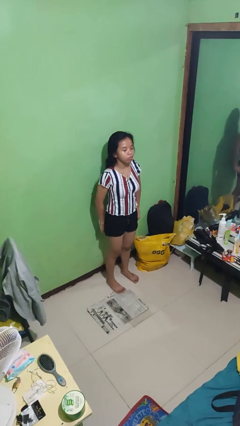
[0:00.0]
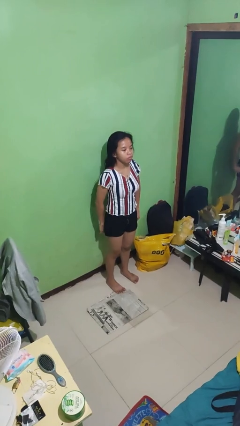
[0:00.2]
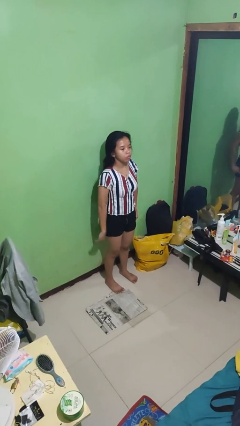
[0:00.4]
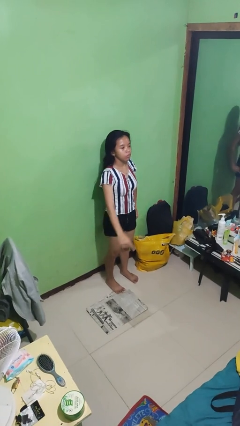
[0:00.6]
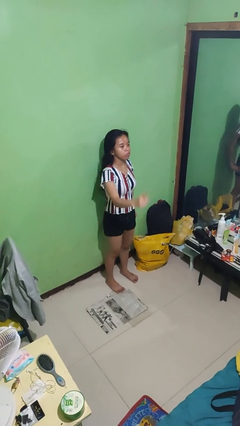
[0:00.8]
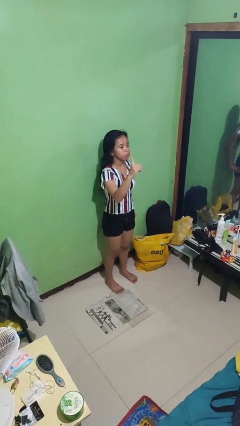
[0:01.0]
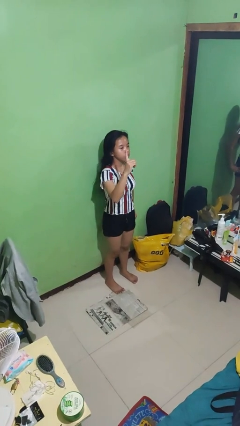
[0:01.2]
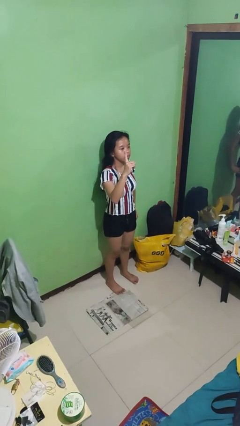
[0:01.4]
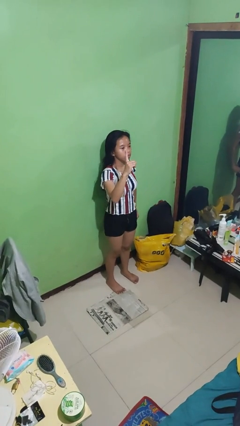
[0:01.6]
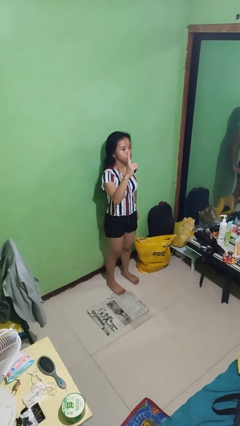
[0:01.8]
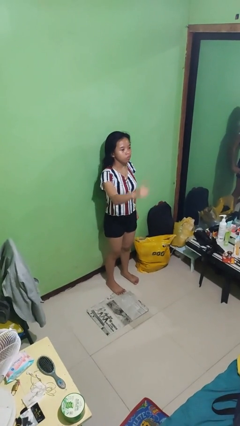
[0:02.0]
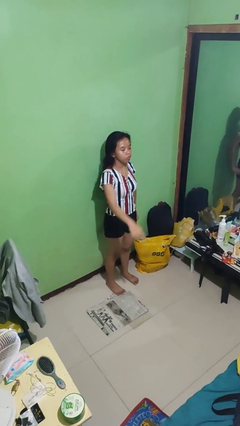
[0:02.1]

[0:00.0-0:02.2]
person gestures number one

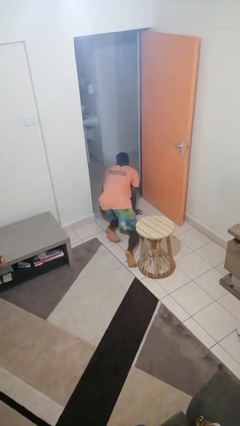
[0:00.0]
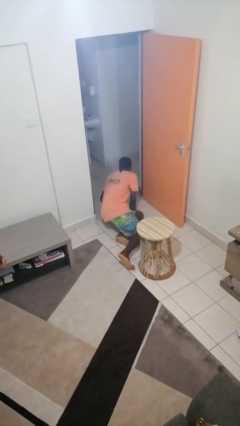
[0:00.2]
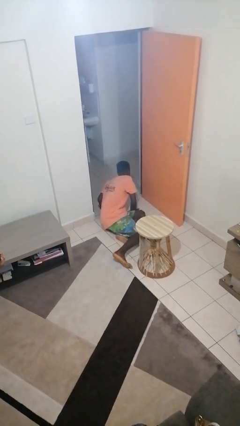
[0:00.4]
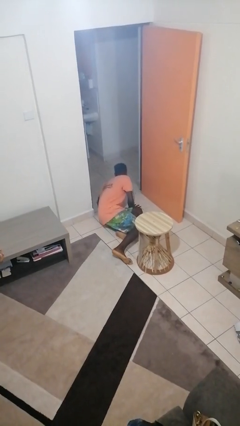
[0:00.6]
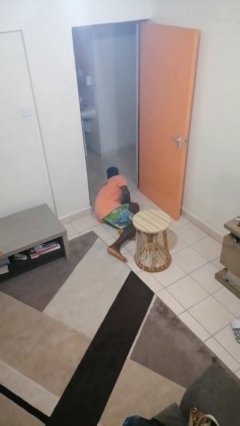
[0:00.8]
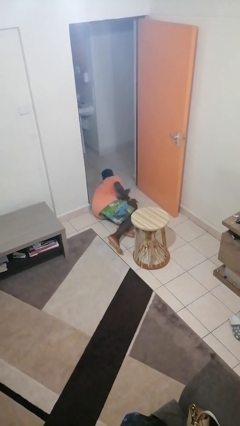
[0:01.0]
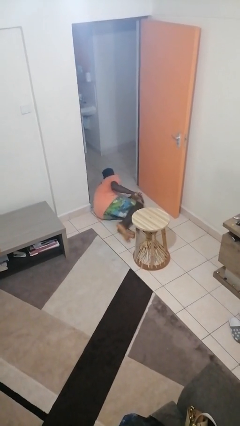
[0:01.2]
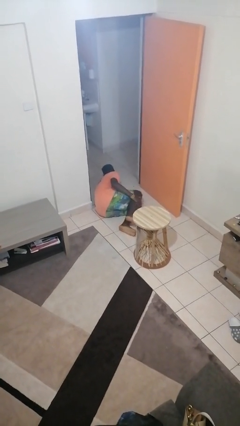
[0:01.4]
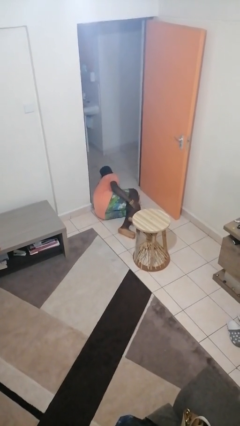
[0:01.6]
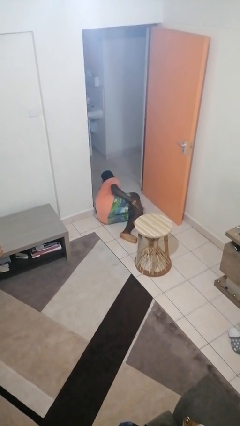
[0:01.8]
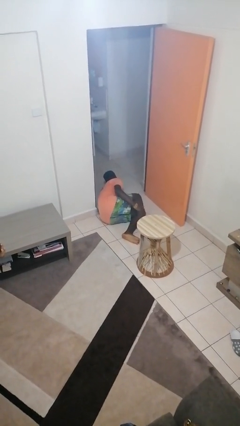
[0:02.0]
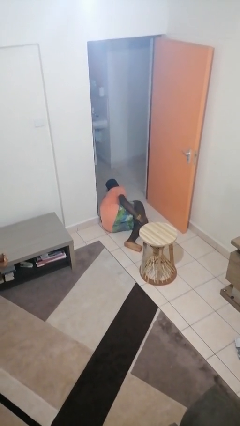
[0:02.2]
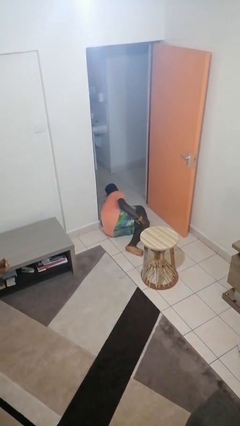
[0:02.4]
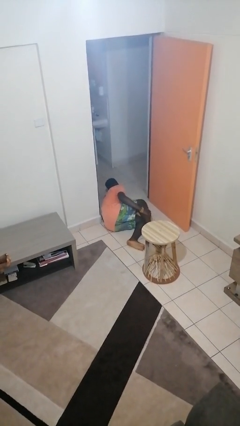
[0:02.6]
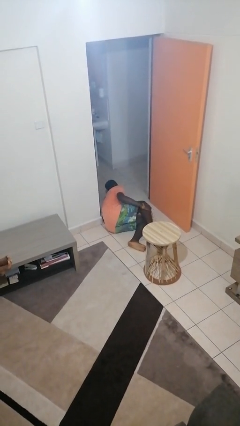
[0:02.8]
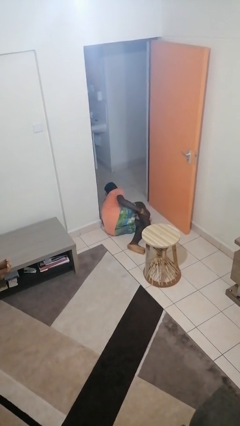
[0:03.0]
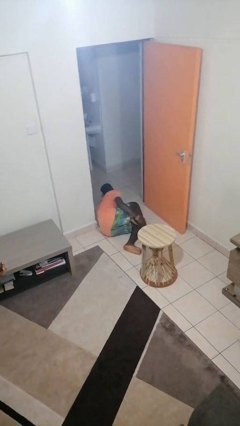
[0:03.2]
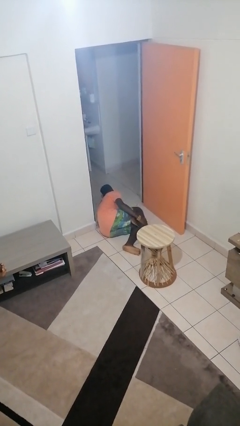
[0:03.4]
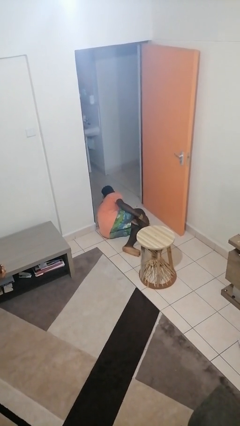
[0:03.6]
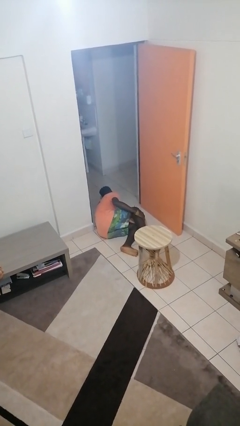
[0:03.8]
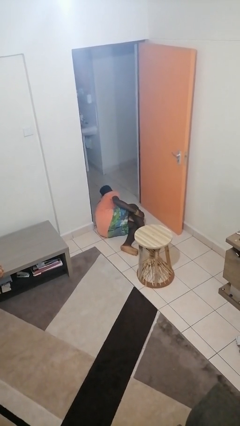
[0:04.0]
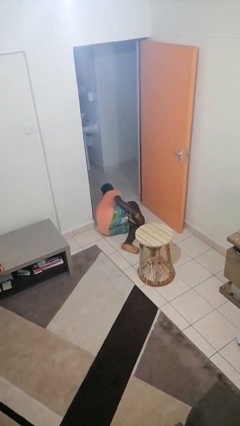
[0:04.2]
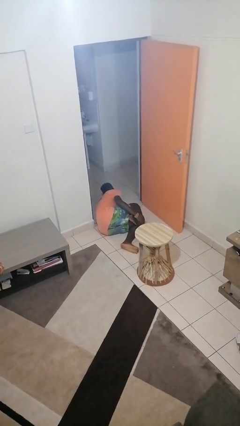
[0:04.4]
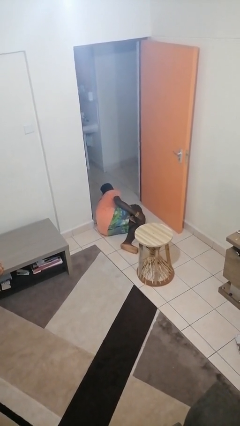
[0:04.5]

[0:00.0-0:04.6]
person lies down on floor

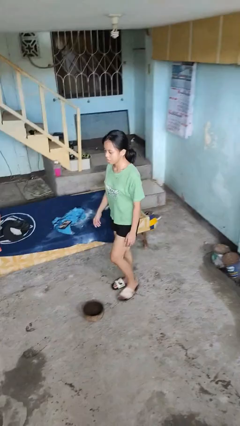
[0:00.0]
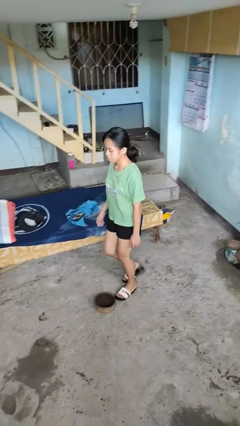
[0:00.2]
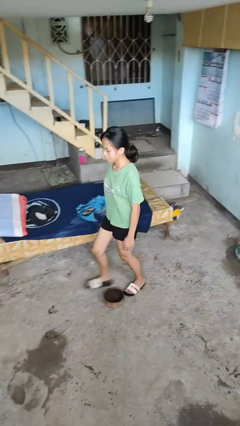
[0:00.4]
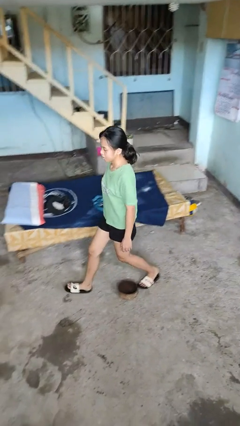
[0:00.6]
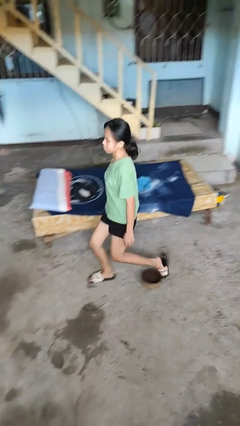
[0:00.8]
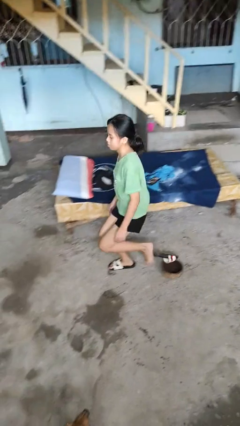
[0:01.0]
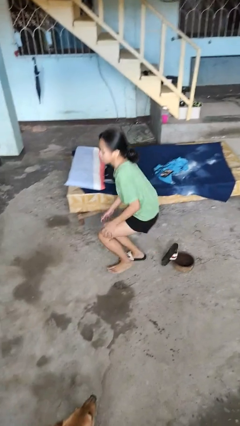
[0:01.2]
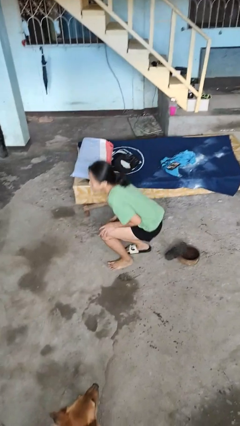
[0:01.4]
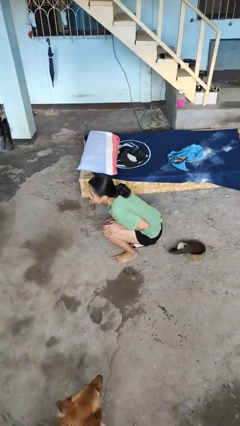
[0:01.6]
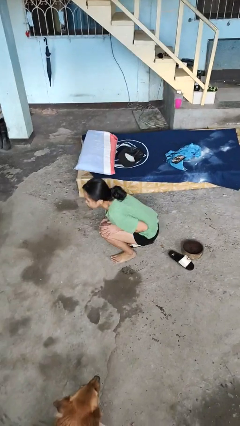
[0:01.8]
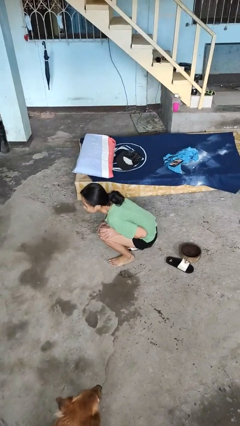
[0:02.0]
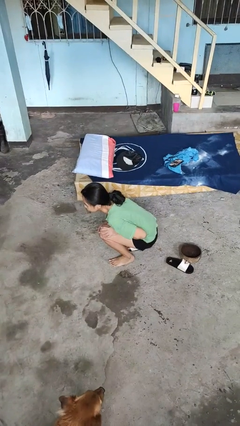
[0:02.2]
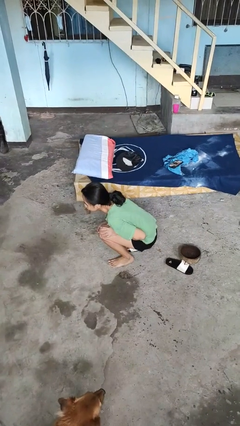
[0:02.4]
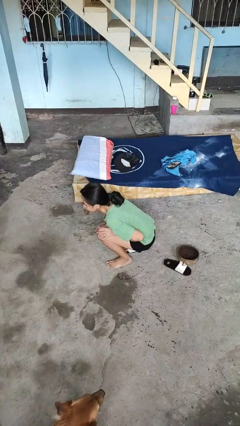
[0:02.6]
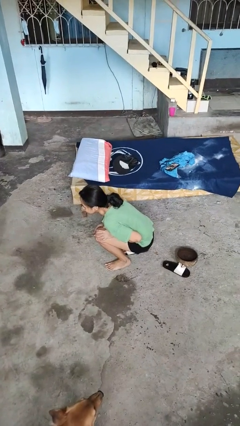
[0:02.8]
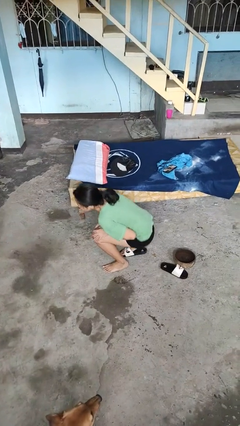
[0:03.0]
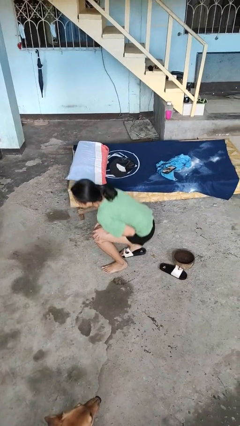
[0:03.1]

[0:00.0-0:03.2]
person trips on object on floor

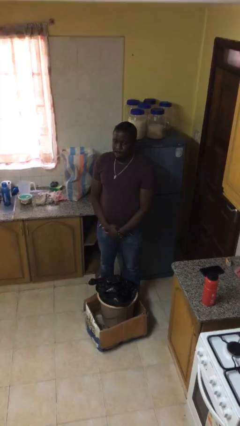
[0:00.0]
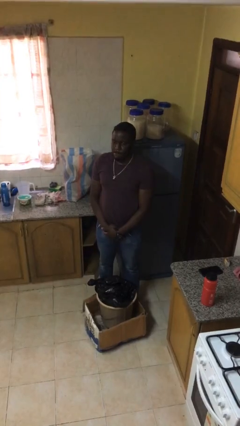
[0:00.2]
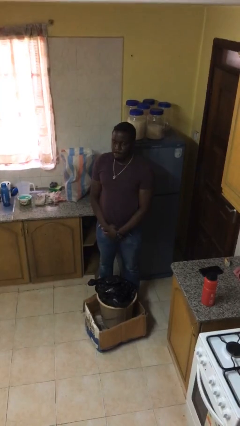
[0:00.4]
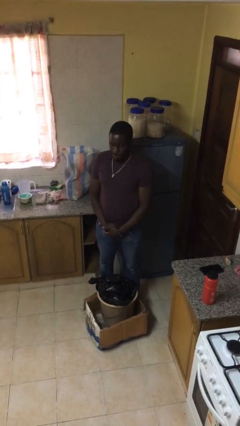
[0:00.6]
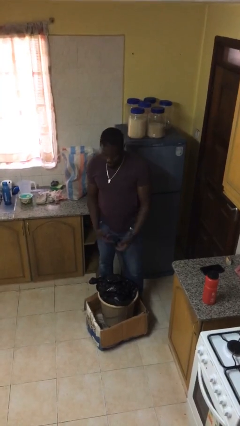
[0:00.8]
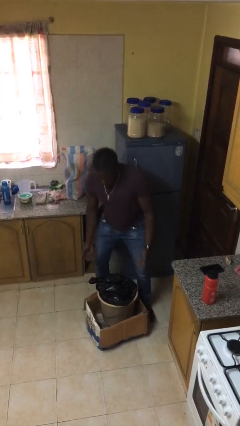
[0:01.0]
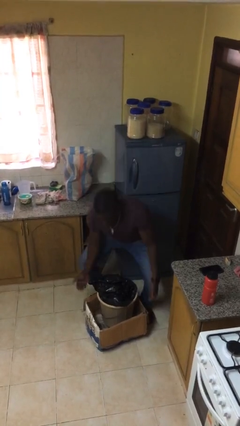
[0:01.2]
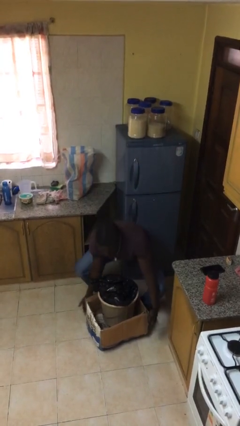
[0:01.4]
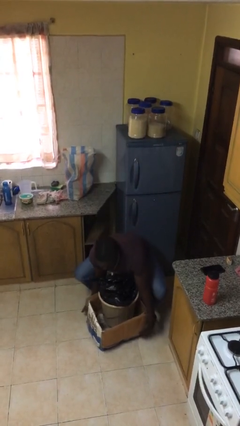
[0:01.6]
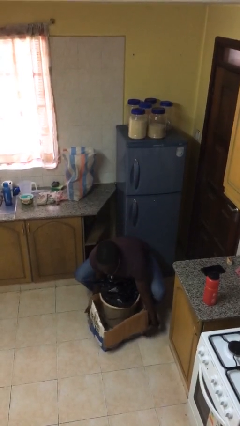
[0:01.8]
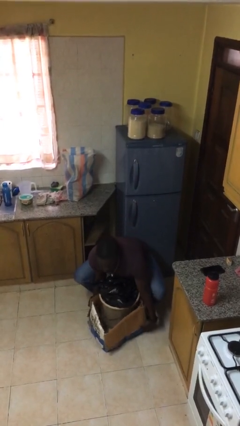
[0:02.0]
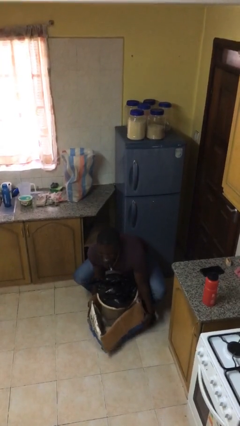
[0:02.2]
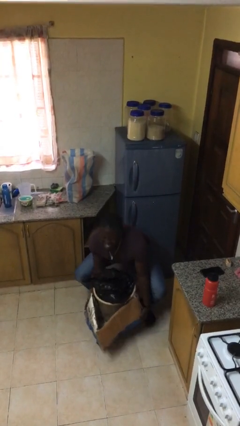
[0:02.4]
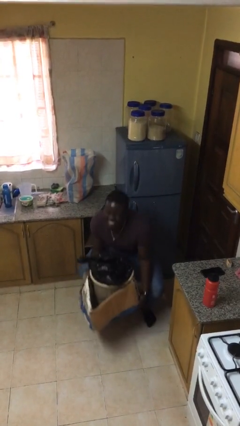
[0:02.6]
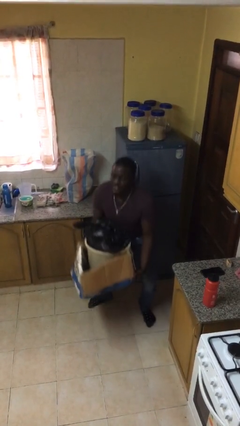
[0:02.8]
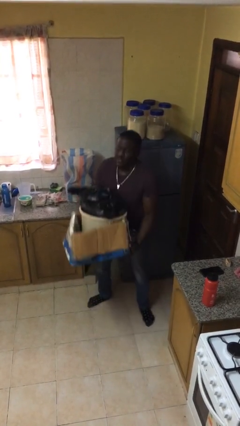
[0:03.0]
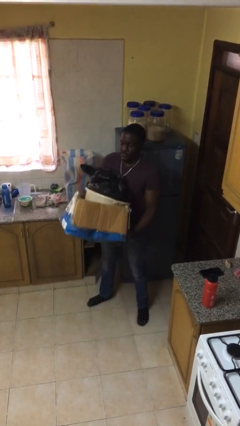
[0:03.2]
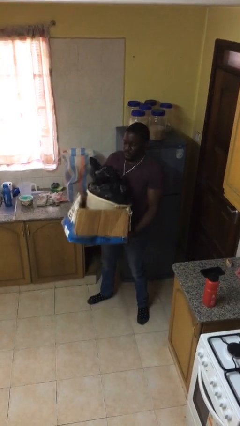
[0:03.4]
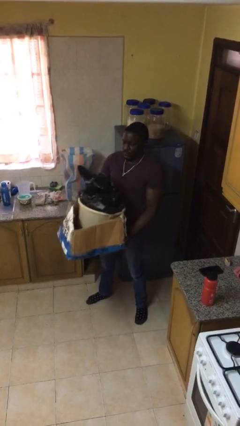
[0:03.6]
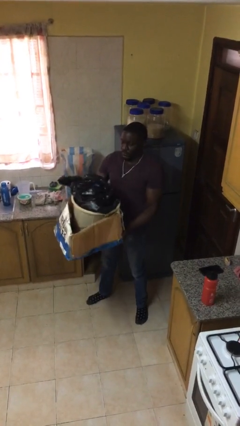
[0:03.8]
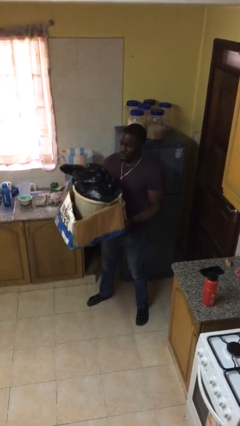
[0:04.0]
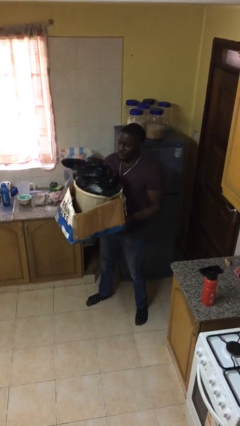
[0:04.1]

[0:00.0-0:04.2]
person picks up object from floor

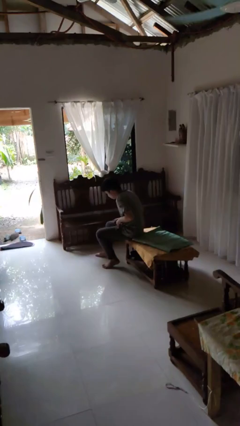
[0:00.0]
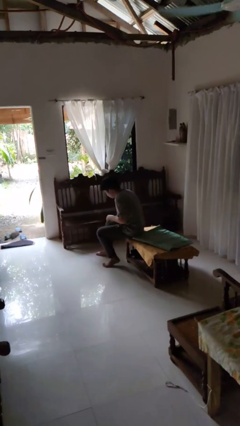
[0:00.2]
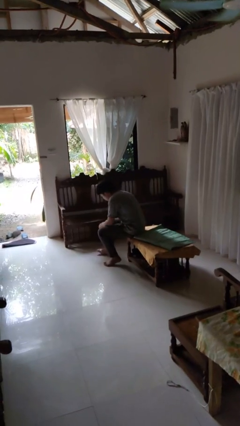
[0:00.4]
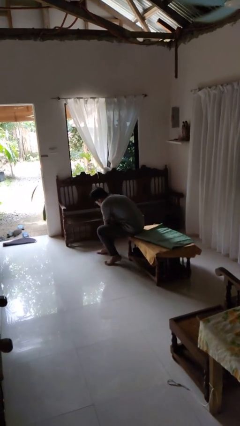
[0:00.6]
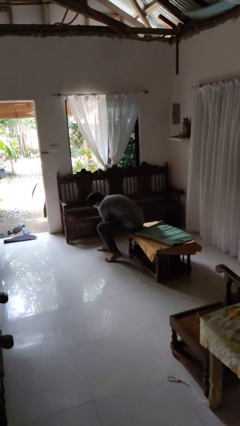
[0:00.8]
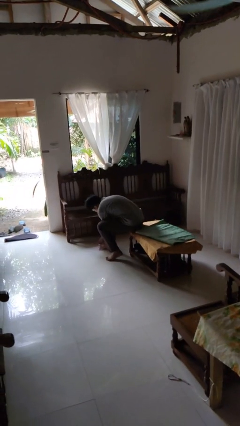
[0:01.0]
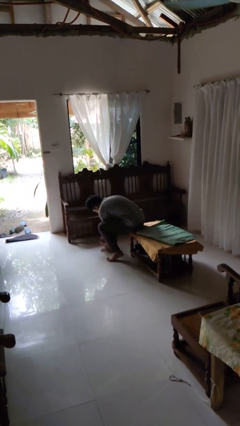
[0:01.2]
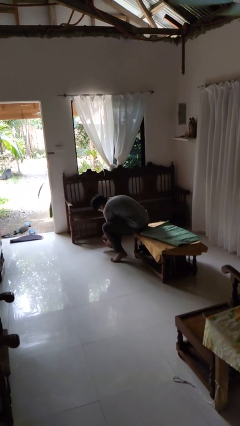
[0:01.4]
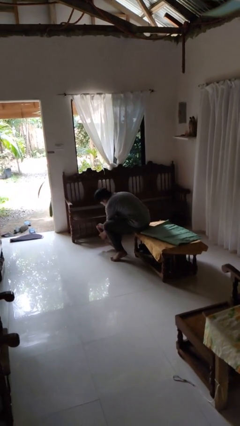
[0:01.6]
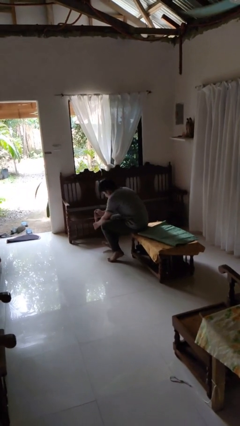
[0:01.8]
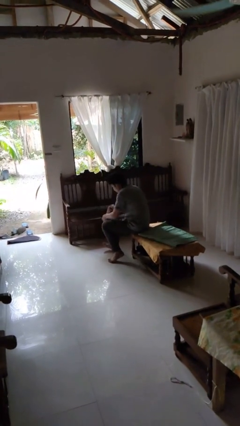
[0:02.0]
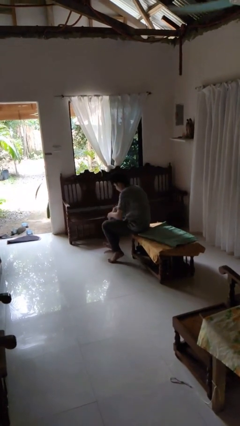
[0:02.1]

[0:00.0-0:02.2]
person takes off socks

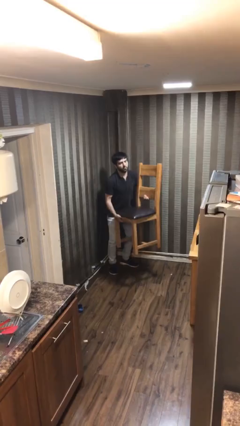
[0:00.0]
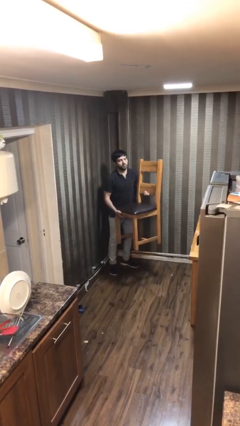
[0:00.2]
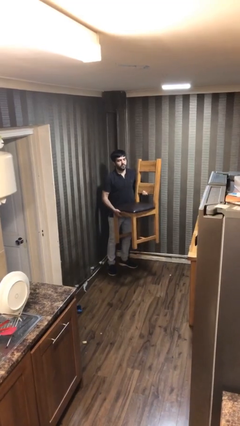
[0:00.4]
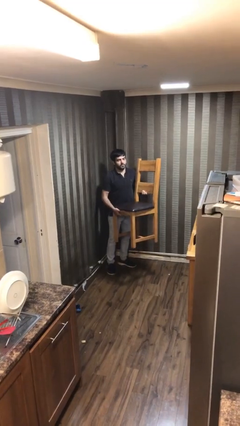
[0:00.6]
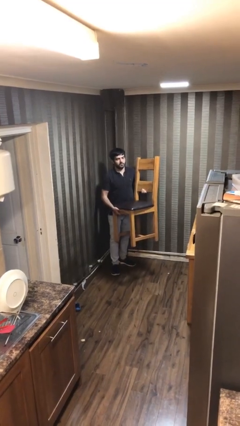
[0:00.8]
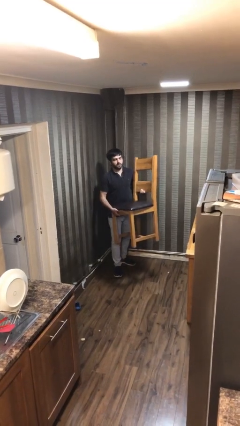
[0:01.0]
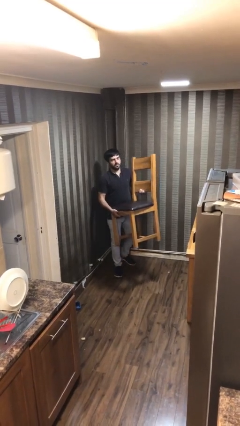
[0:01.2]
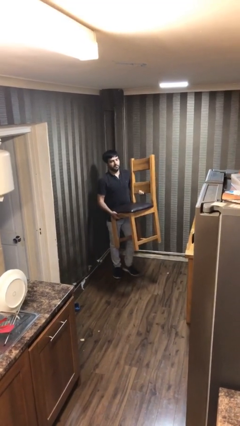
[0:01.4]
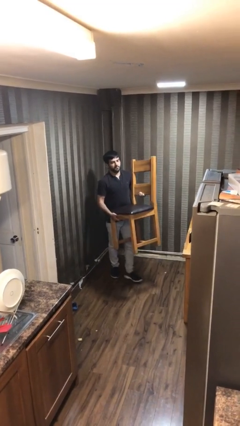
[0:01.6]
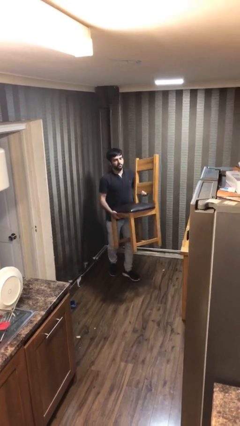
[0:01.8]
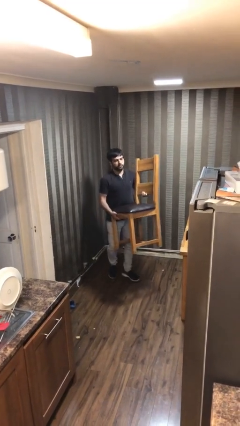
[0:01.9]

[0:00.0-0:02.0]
person carries heavy object
